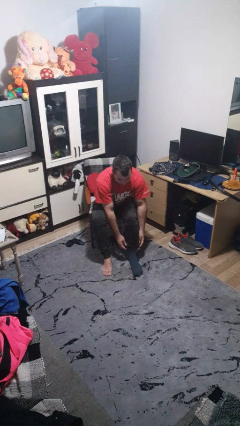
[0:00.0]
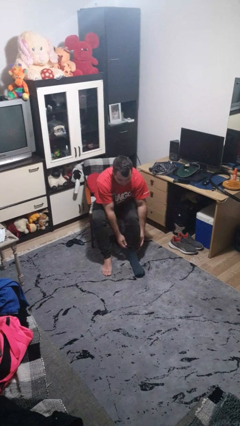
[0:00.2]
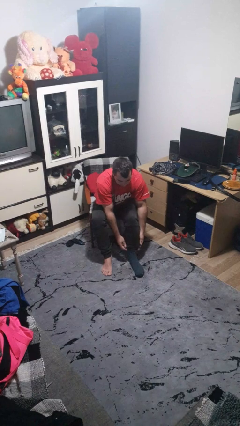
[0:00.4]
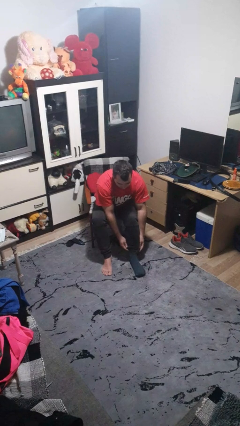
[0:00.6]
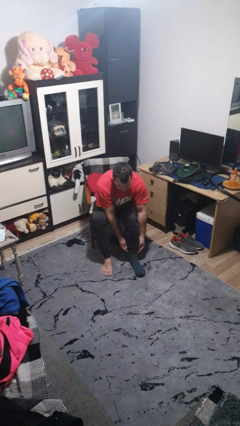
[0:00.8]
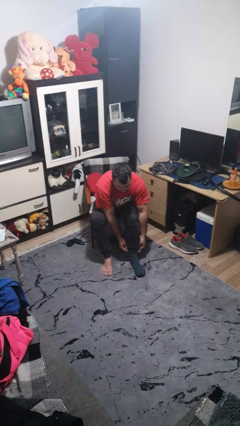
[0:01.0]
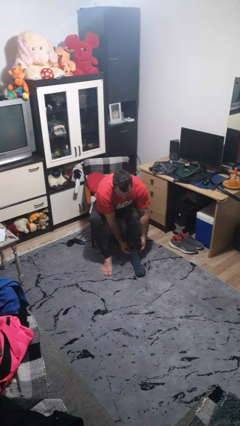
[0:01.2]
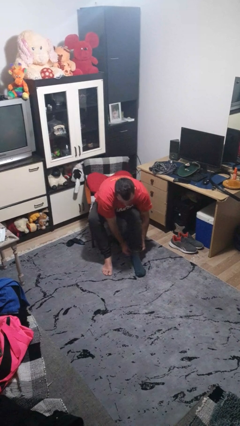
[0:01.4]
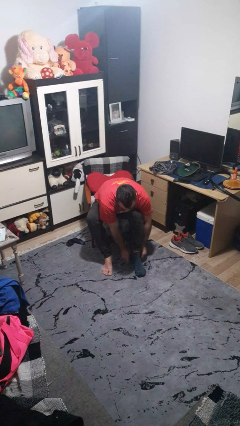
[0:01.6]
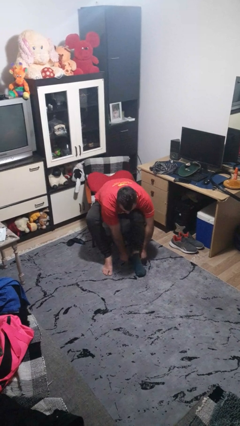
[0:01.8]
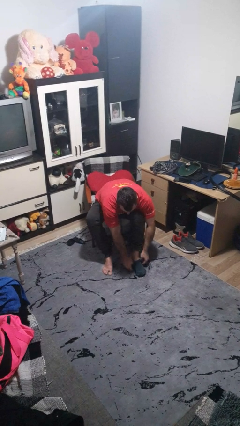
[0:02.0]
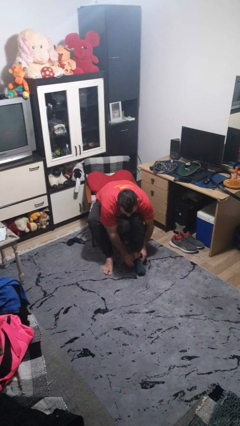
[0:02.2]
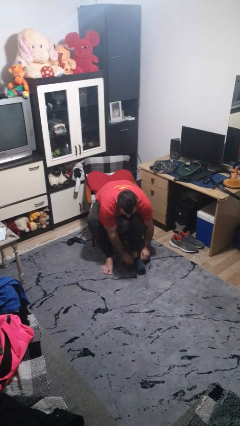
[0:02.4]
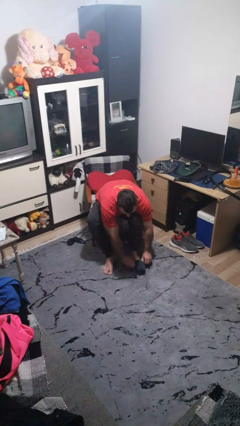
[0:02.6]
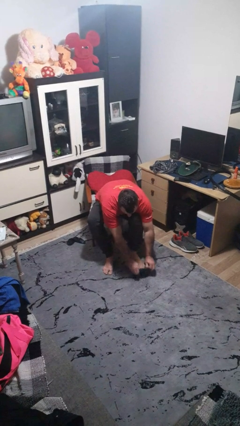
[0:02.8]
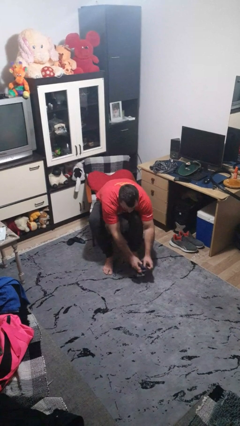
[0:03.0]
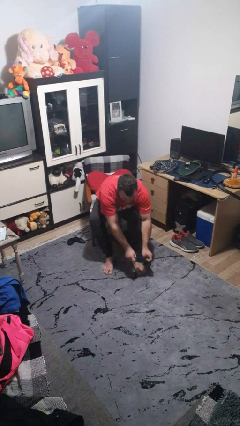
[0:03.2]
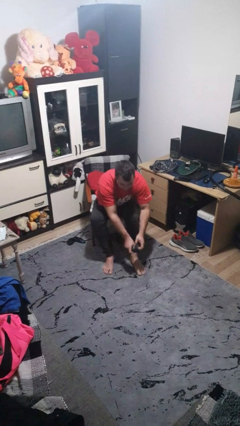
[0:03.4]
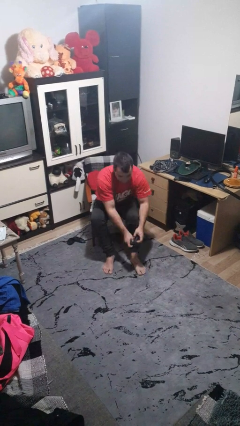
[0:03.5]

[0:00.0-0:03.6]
person takes off socks

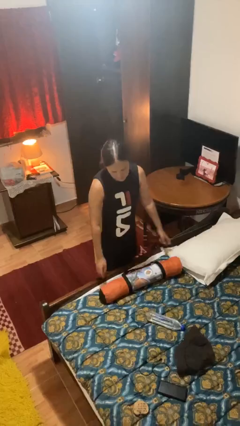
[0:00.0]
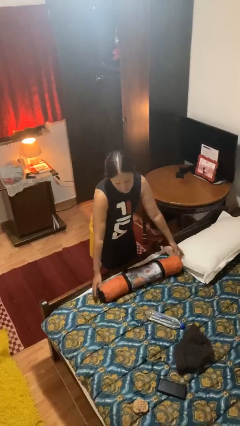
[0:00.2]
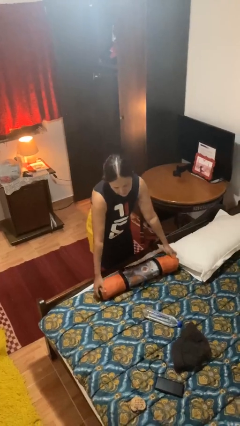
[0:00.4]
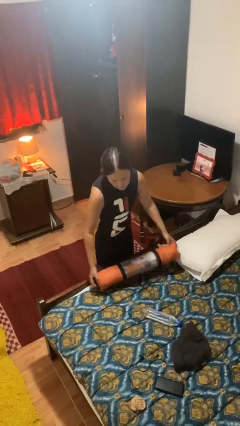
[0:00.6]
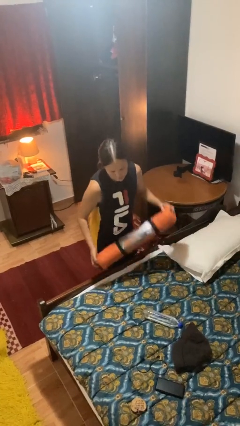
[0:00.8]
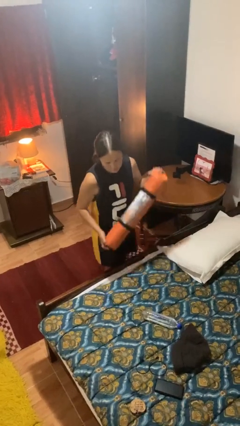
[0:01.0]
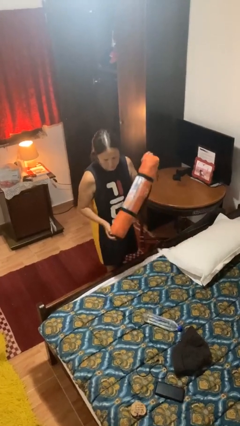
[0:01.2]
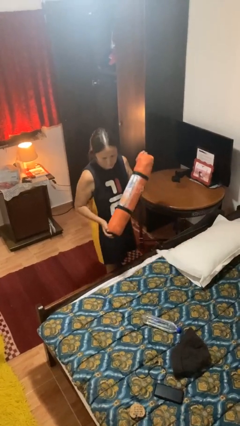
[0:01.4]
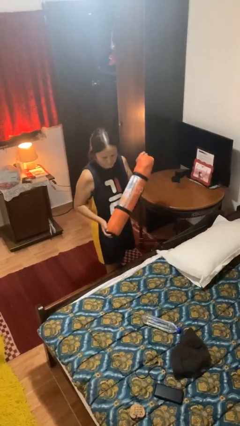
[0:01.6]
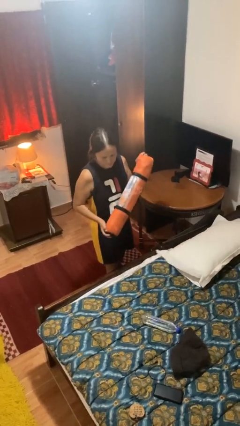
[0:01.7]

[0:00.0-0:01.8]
person picks up object from bed

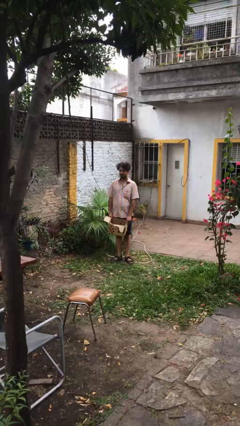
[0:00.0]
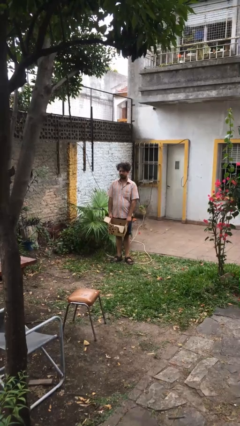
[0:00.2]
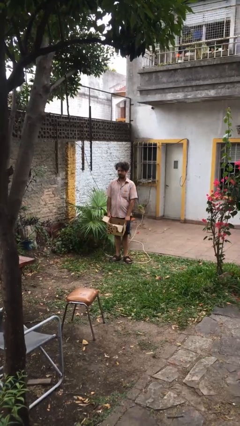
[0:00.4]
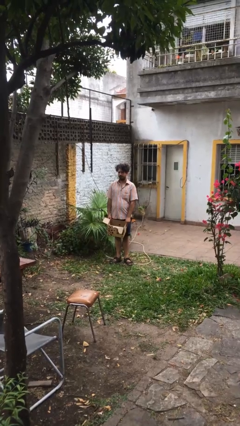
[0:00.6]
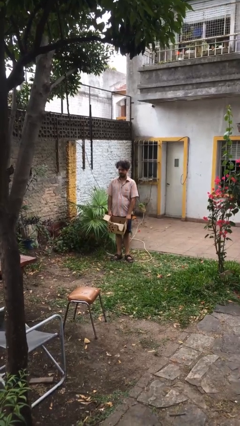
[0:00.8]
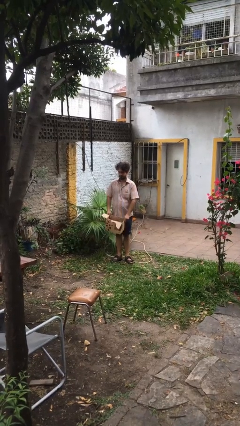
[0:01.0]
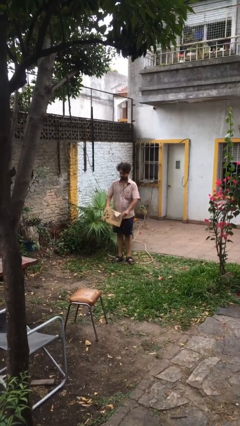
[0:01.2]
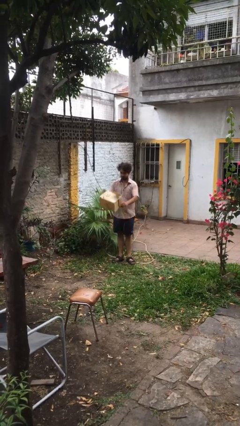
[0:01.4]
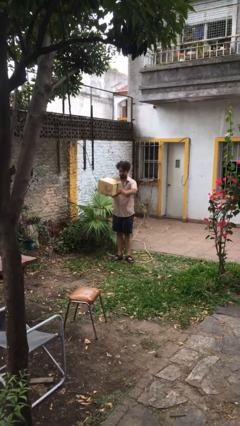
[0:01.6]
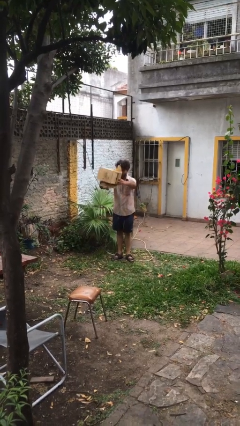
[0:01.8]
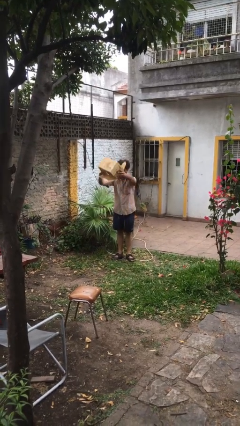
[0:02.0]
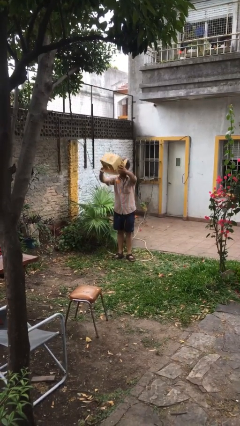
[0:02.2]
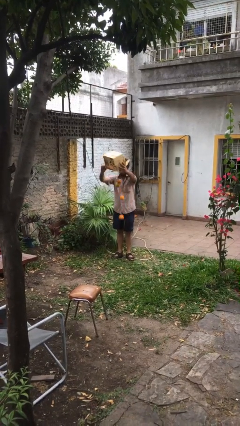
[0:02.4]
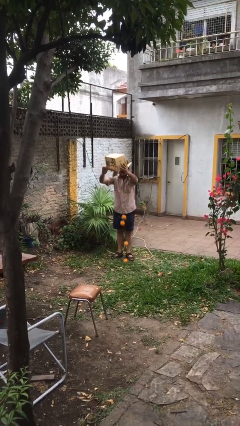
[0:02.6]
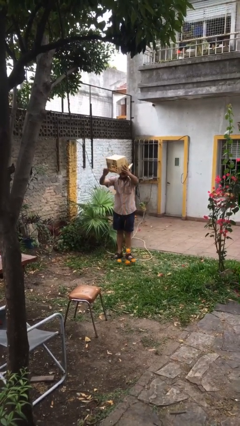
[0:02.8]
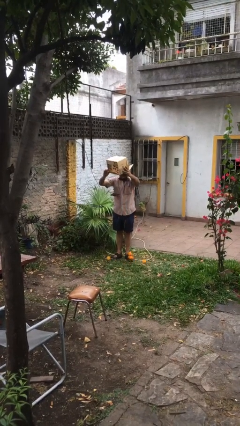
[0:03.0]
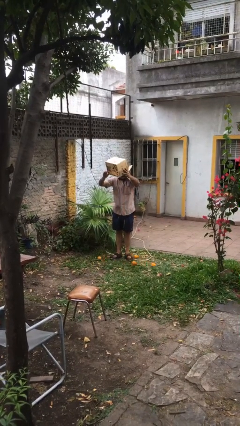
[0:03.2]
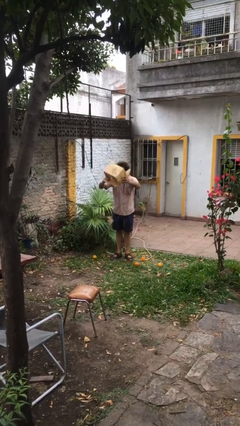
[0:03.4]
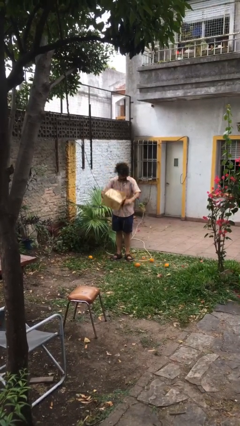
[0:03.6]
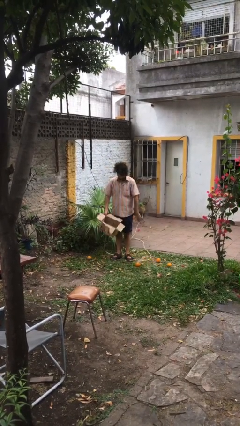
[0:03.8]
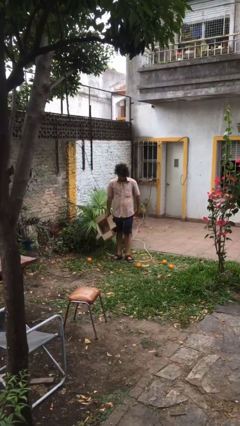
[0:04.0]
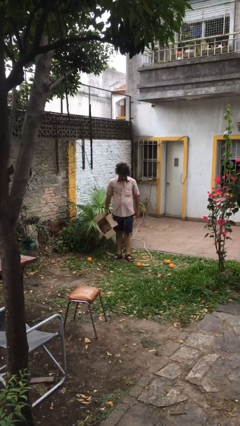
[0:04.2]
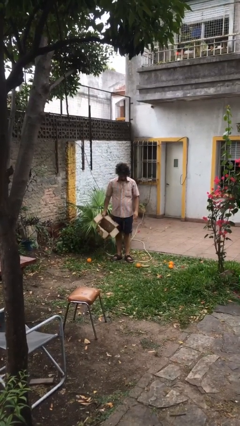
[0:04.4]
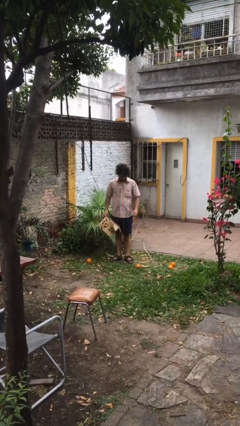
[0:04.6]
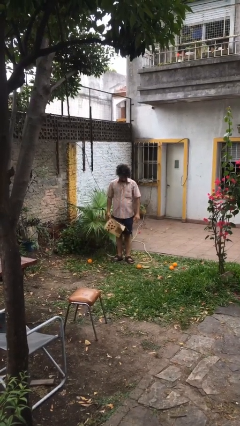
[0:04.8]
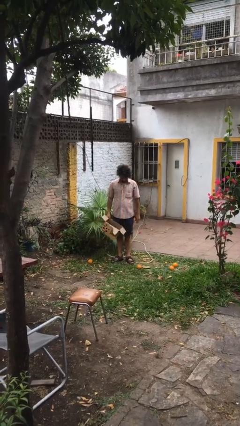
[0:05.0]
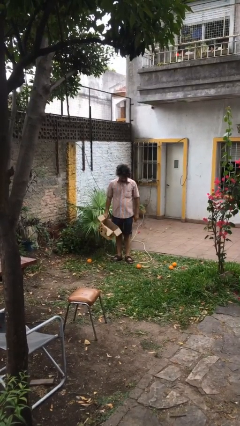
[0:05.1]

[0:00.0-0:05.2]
person unloads box onto floor

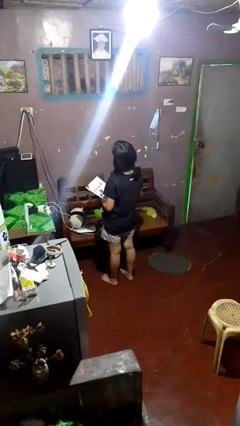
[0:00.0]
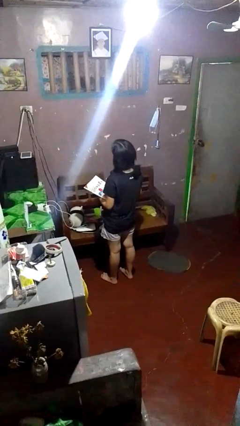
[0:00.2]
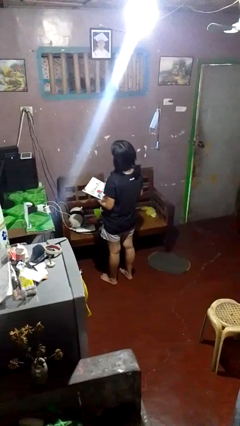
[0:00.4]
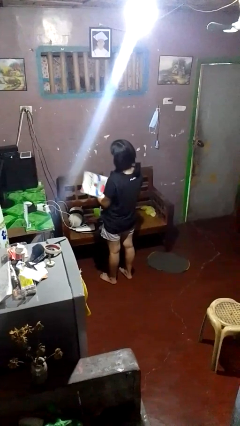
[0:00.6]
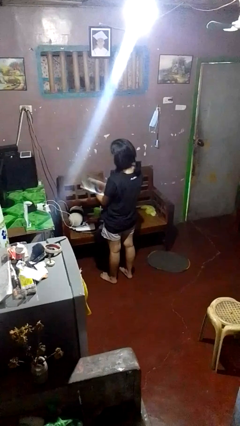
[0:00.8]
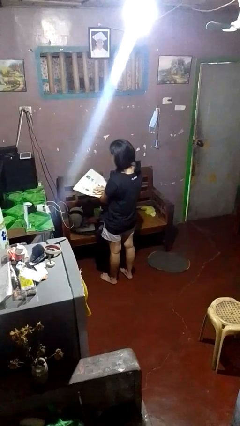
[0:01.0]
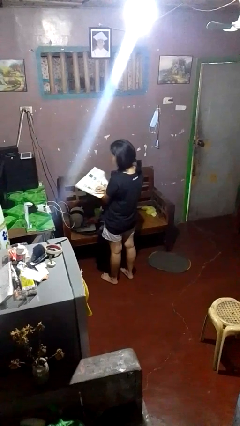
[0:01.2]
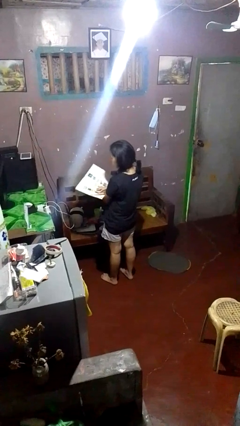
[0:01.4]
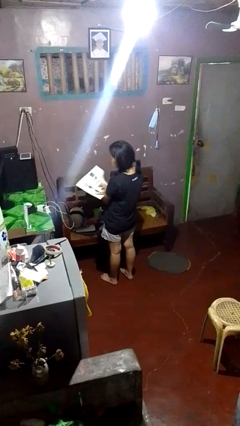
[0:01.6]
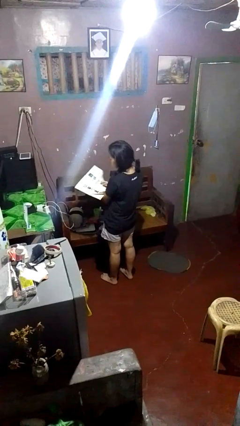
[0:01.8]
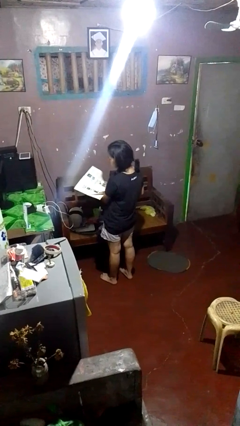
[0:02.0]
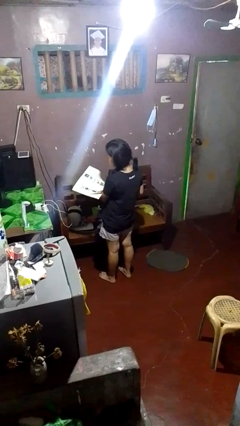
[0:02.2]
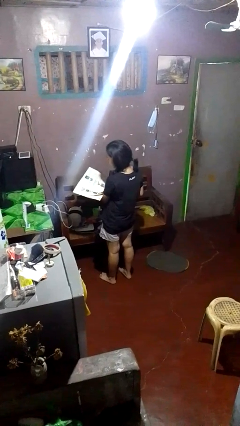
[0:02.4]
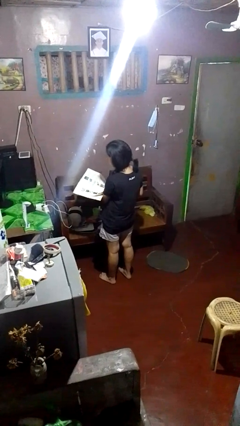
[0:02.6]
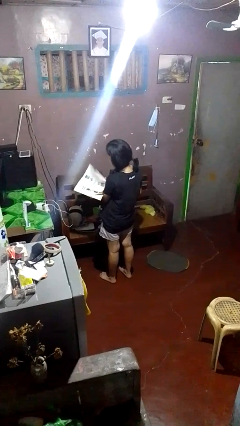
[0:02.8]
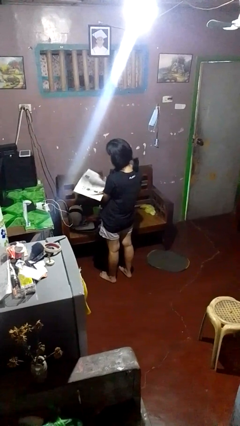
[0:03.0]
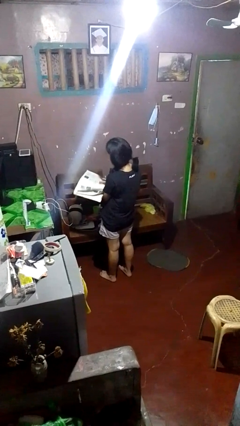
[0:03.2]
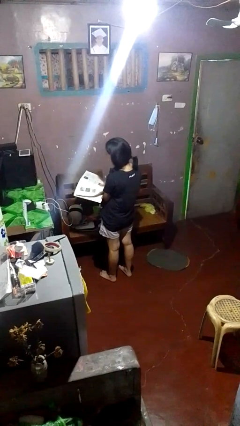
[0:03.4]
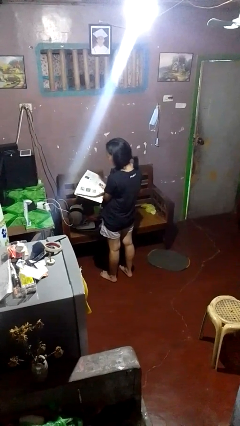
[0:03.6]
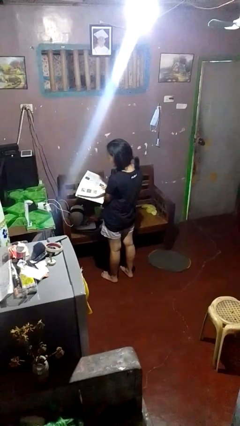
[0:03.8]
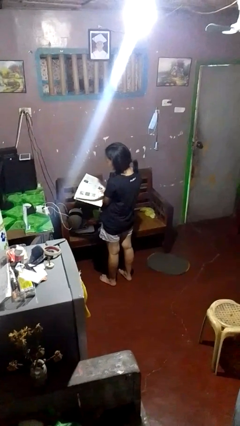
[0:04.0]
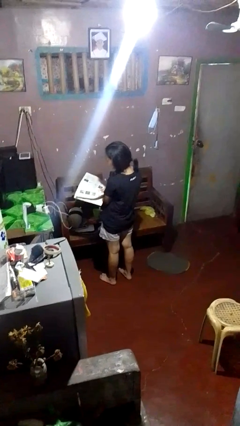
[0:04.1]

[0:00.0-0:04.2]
person reads book

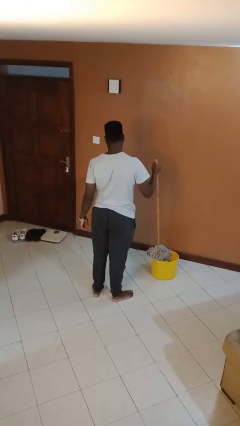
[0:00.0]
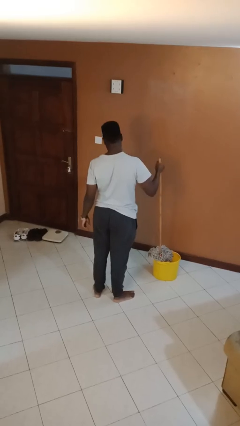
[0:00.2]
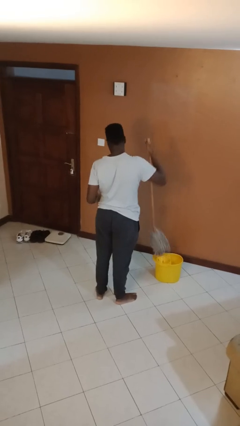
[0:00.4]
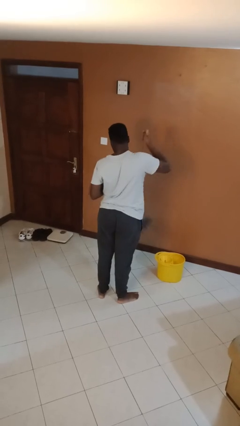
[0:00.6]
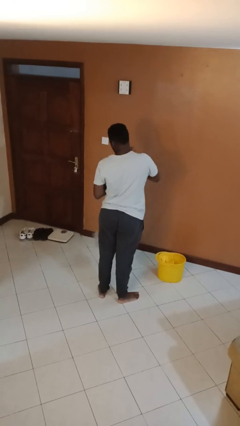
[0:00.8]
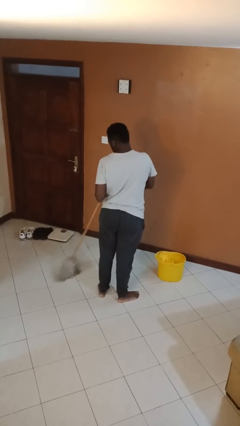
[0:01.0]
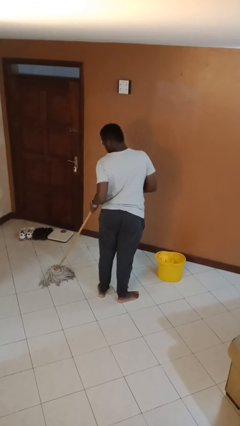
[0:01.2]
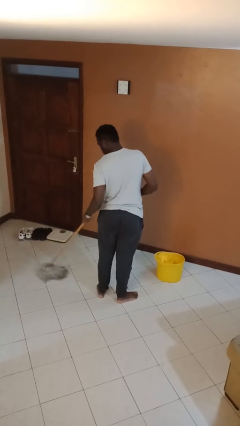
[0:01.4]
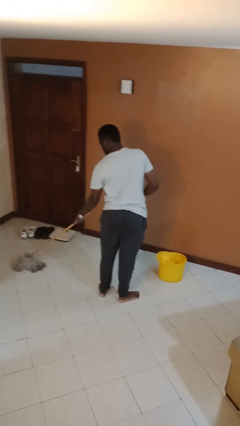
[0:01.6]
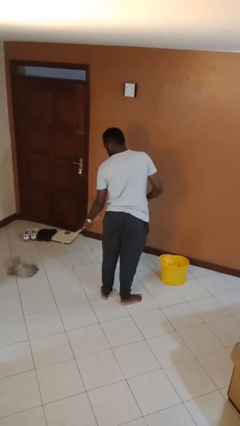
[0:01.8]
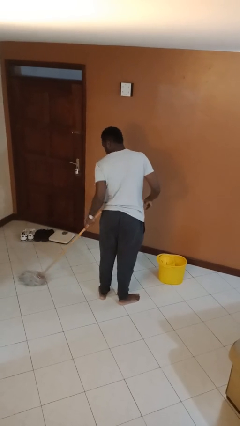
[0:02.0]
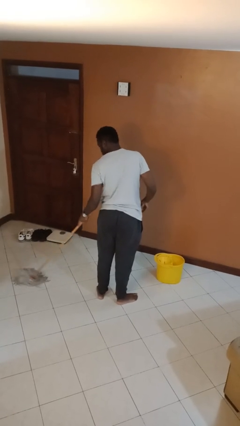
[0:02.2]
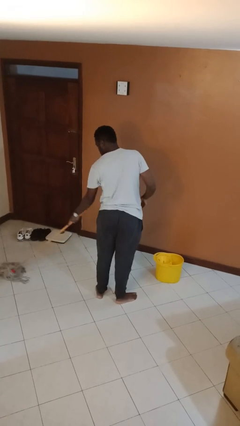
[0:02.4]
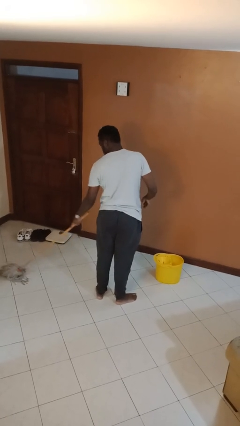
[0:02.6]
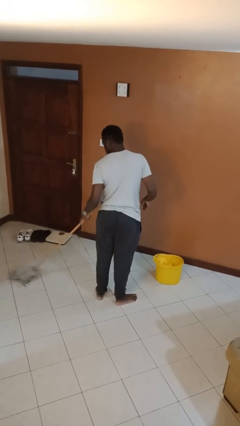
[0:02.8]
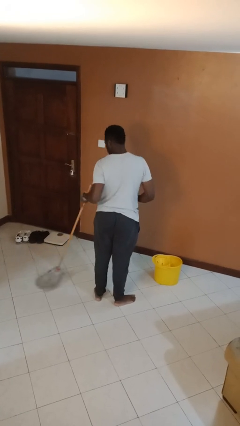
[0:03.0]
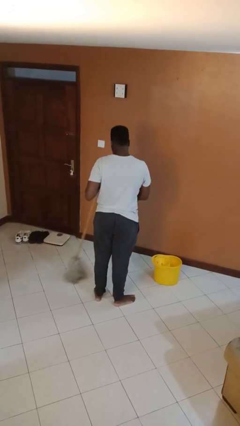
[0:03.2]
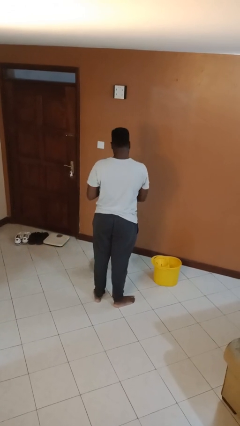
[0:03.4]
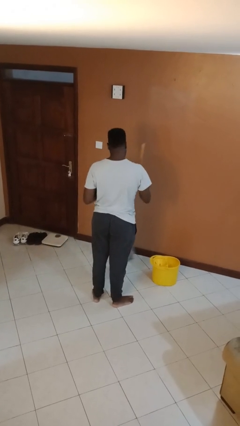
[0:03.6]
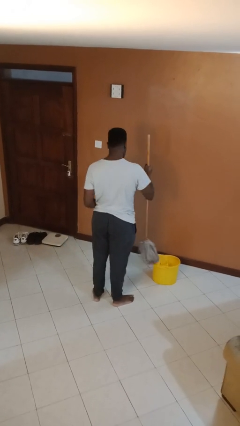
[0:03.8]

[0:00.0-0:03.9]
person mops
